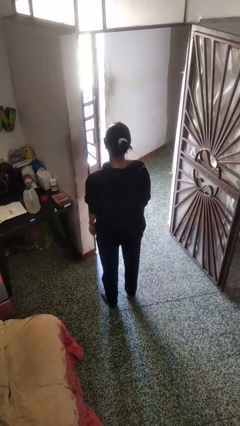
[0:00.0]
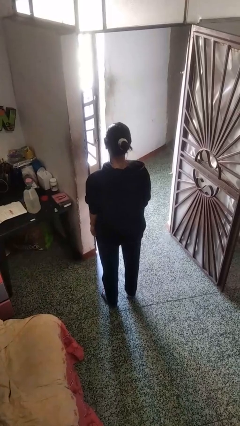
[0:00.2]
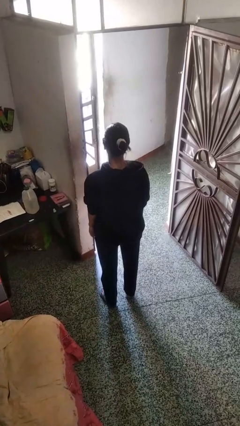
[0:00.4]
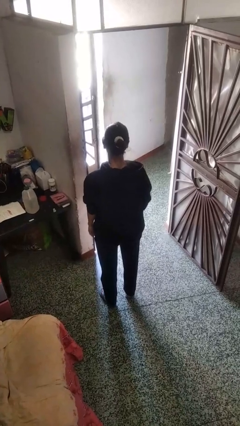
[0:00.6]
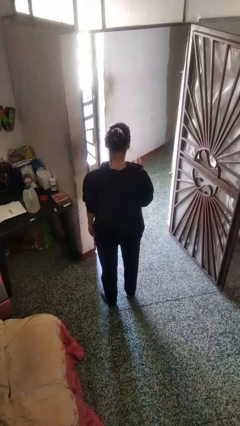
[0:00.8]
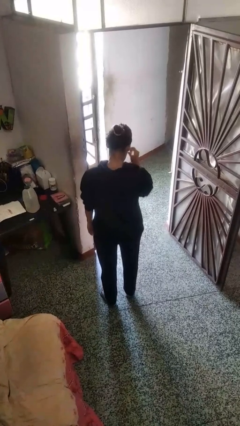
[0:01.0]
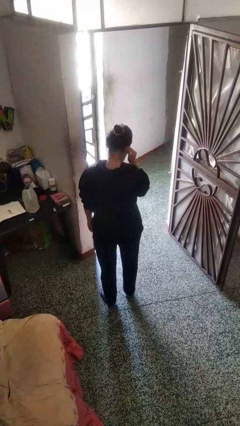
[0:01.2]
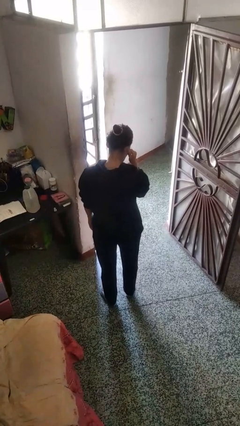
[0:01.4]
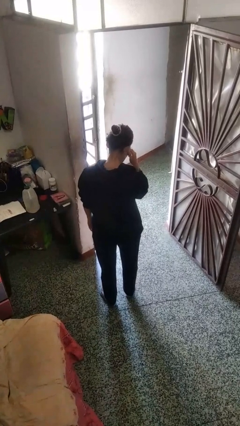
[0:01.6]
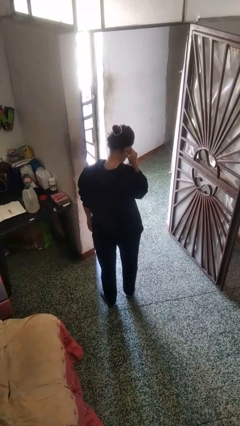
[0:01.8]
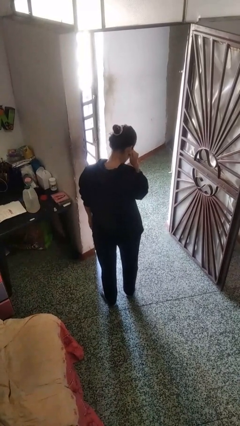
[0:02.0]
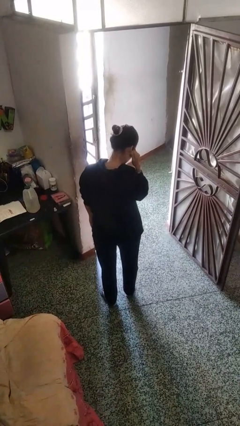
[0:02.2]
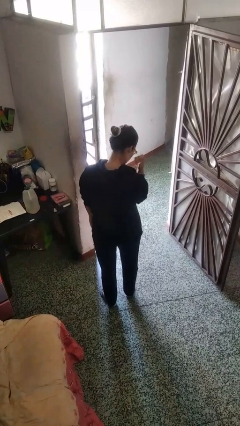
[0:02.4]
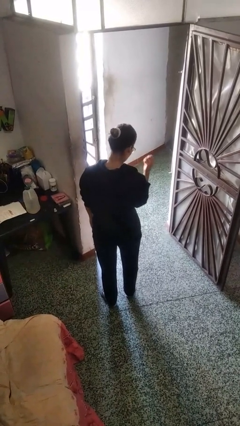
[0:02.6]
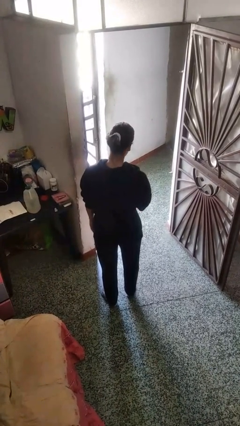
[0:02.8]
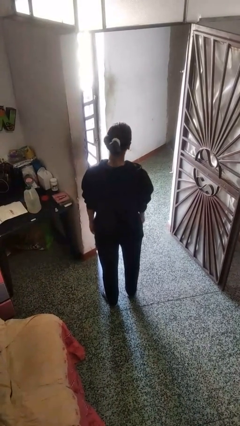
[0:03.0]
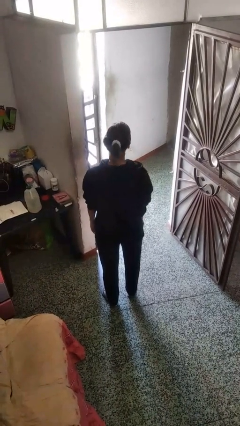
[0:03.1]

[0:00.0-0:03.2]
person touches earlobe

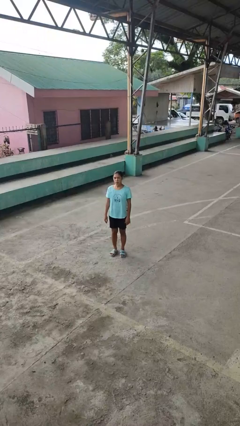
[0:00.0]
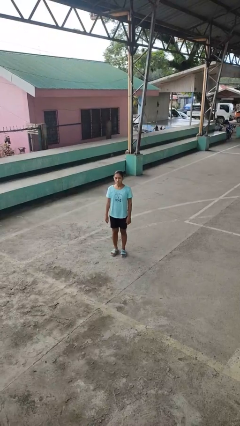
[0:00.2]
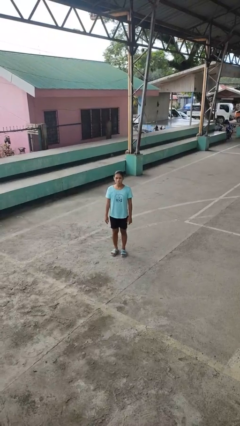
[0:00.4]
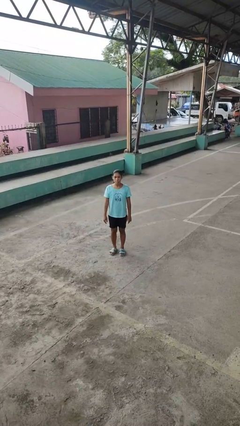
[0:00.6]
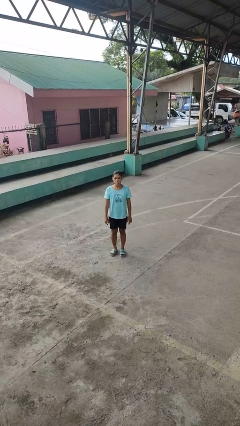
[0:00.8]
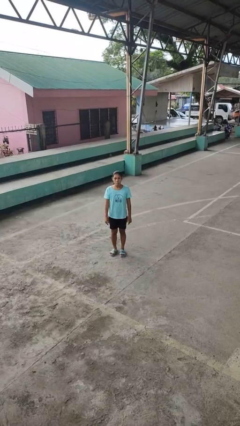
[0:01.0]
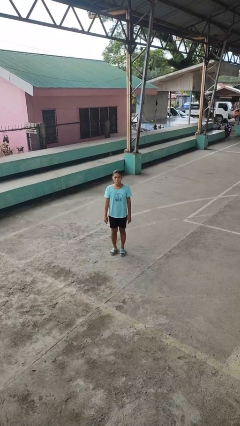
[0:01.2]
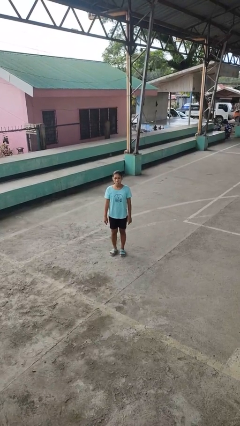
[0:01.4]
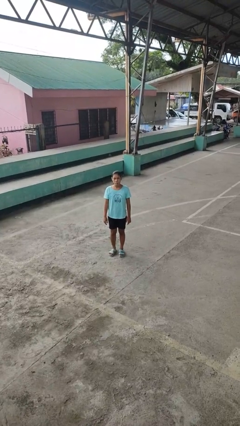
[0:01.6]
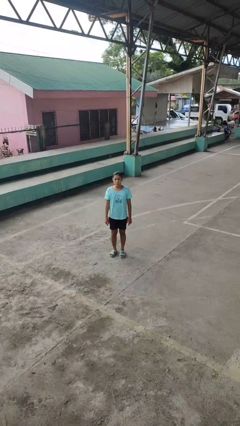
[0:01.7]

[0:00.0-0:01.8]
person sticks out tongue

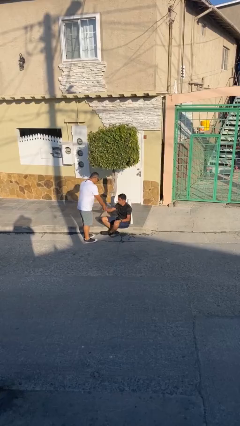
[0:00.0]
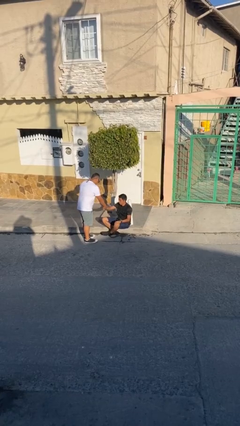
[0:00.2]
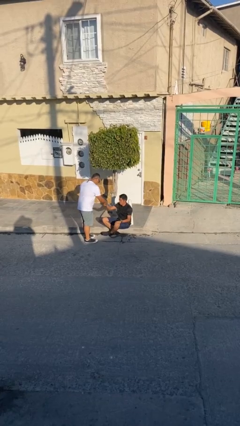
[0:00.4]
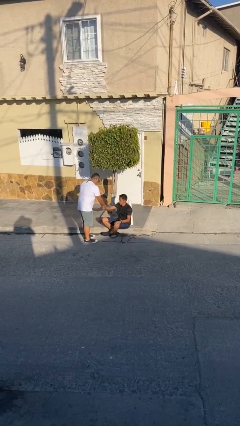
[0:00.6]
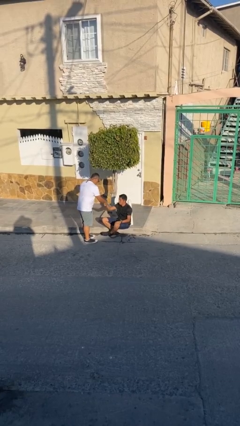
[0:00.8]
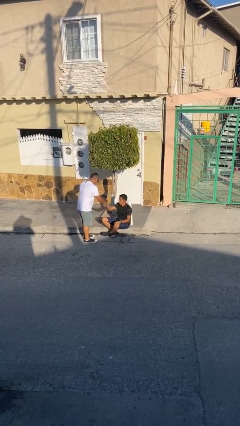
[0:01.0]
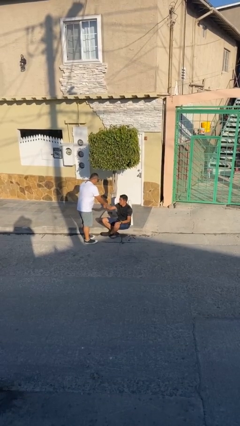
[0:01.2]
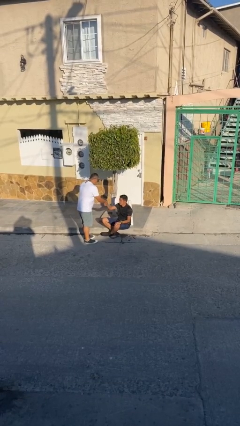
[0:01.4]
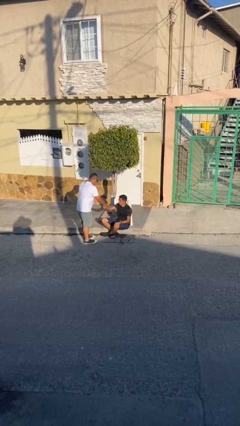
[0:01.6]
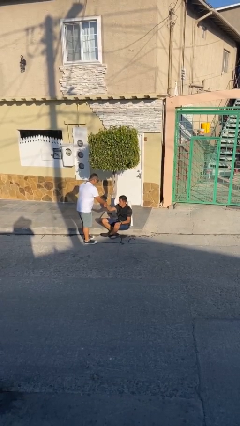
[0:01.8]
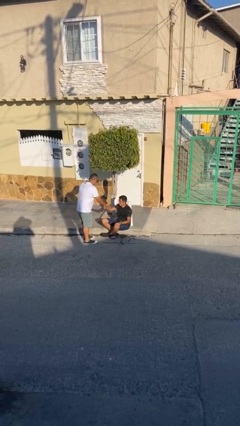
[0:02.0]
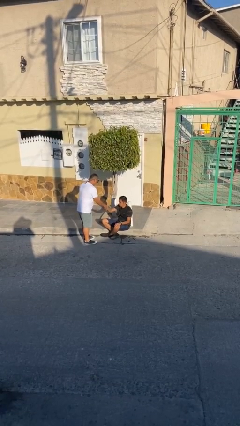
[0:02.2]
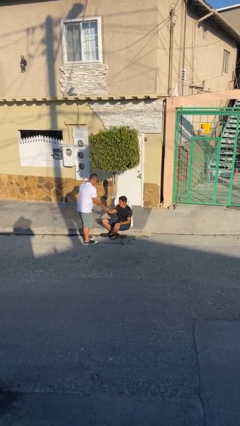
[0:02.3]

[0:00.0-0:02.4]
person shakes hand

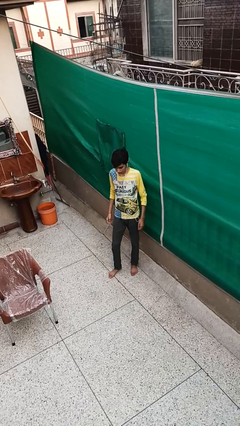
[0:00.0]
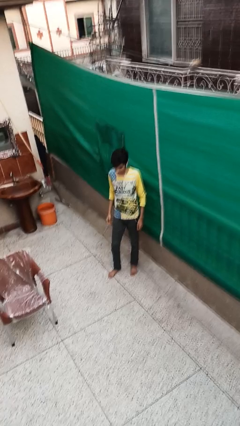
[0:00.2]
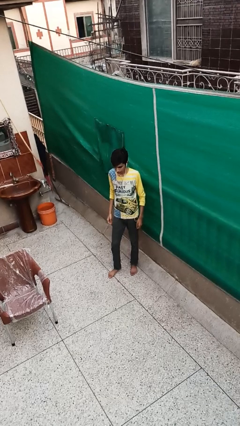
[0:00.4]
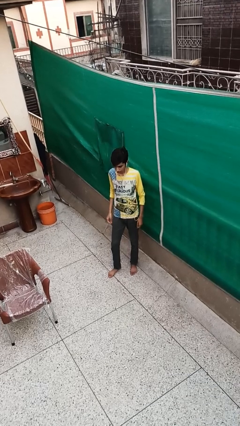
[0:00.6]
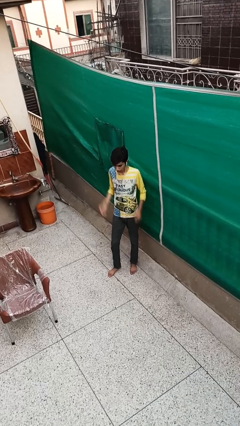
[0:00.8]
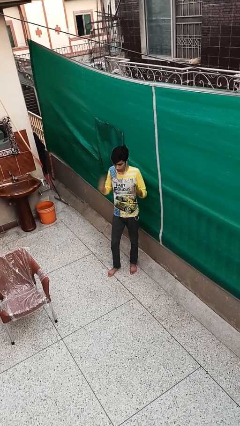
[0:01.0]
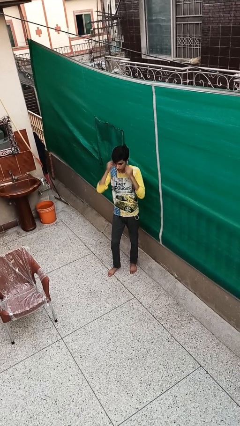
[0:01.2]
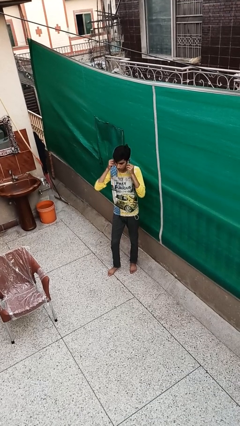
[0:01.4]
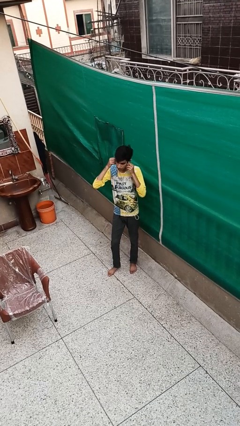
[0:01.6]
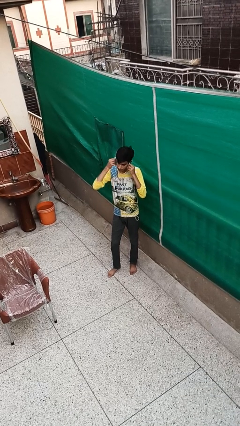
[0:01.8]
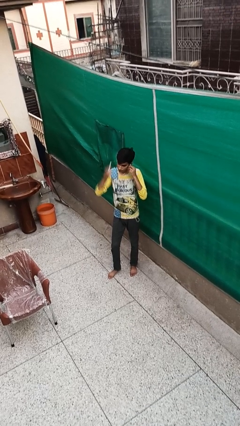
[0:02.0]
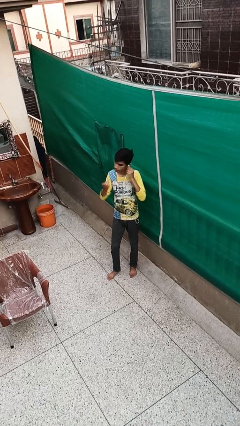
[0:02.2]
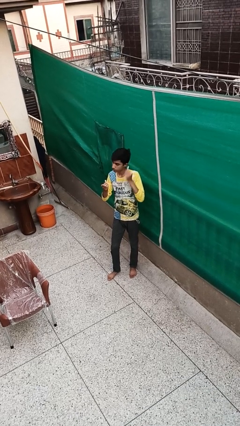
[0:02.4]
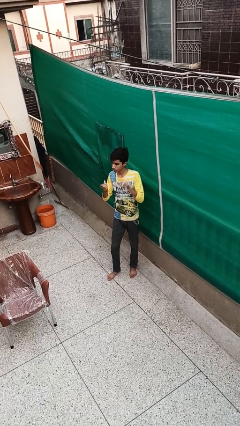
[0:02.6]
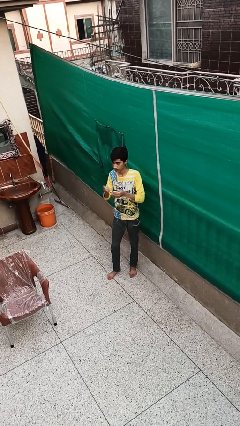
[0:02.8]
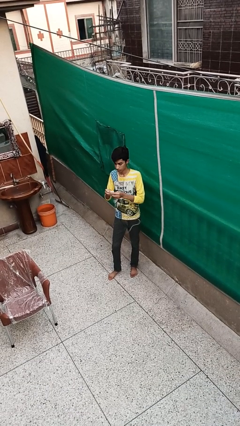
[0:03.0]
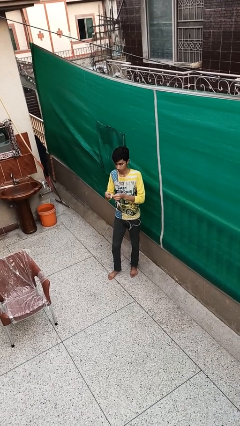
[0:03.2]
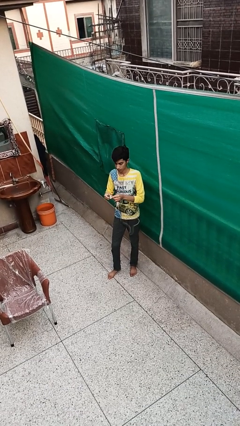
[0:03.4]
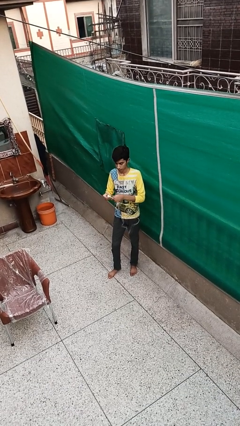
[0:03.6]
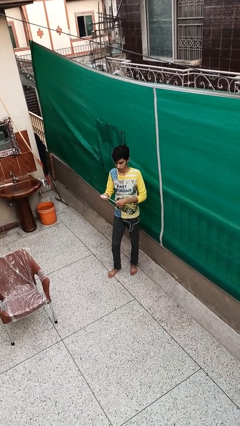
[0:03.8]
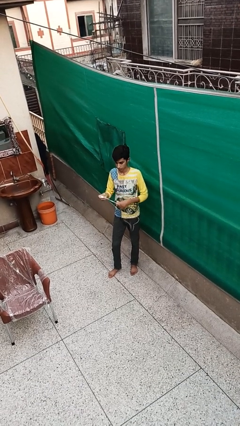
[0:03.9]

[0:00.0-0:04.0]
person takes off headphones

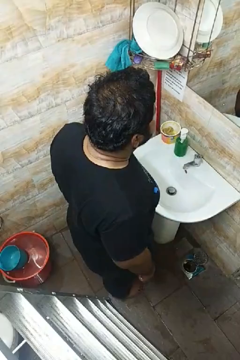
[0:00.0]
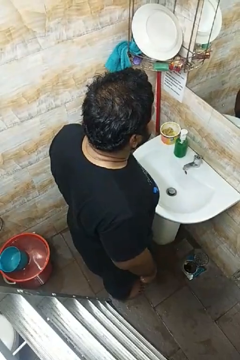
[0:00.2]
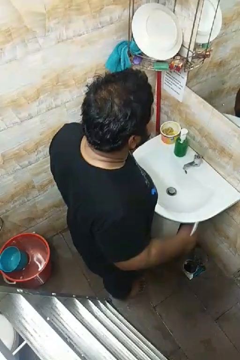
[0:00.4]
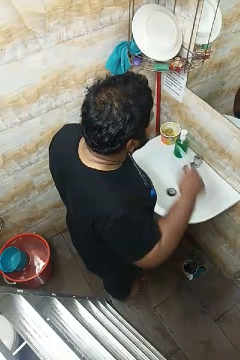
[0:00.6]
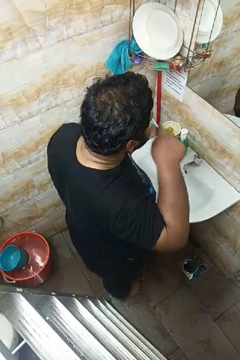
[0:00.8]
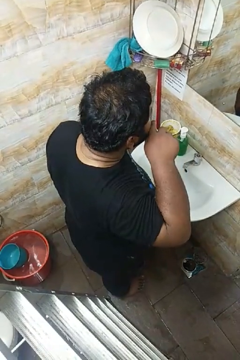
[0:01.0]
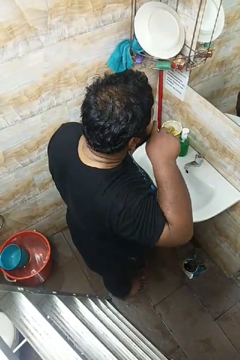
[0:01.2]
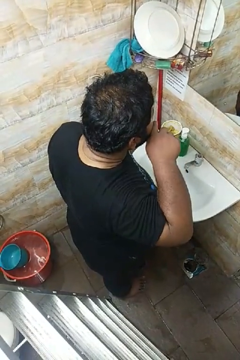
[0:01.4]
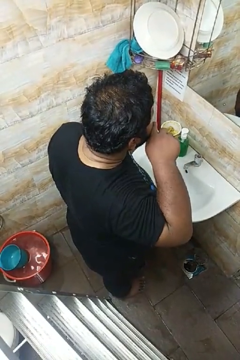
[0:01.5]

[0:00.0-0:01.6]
person brushes teeth

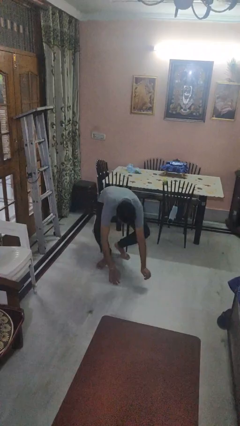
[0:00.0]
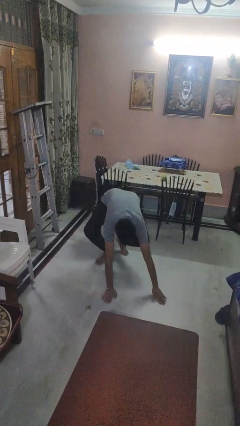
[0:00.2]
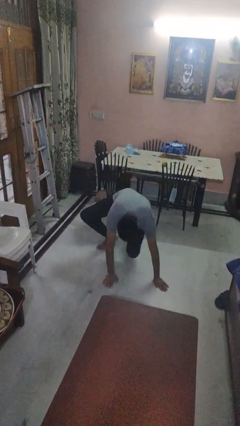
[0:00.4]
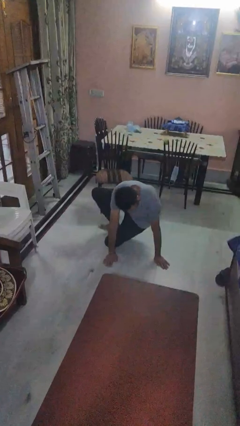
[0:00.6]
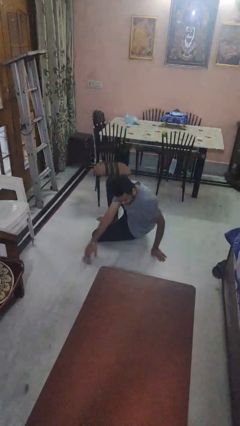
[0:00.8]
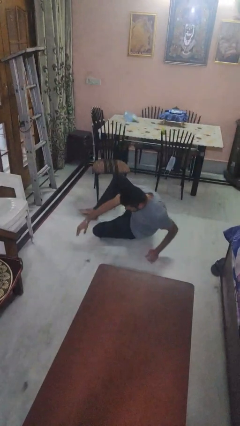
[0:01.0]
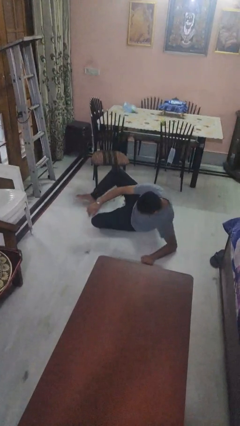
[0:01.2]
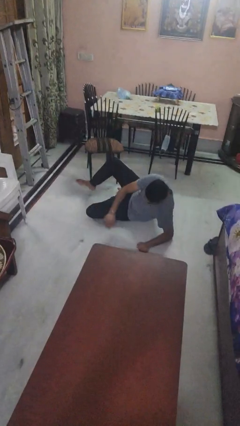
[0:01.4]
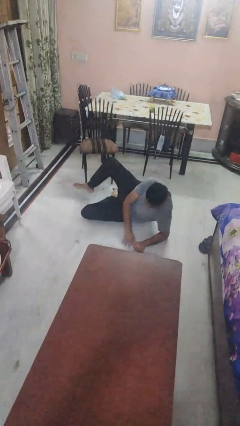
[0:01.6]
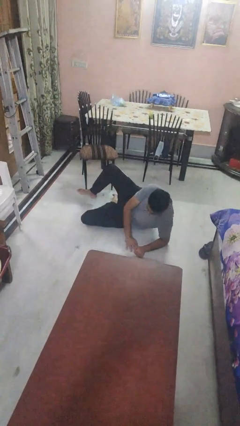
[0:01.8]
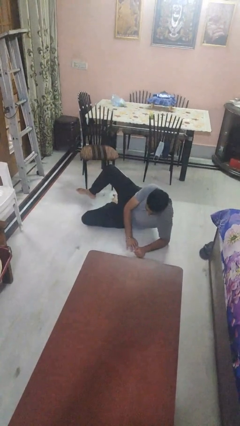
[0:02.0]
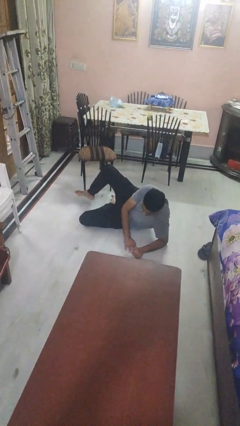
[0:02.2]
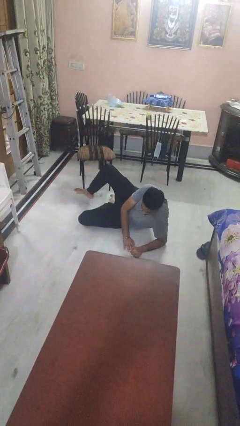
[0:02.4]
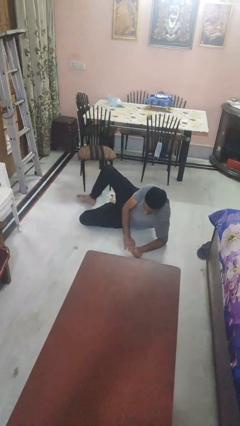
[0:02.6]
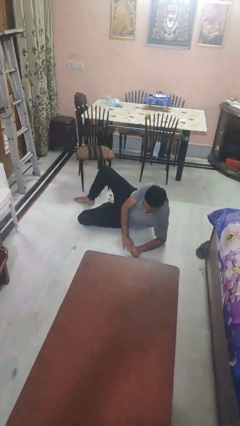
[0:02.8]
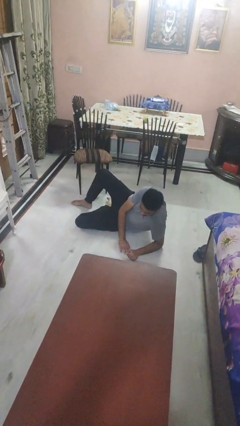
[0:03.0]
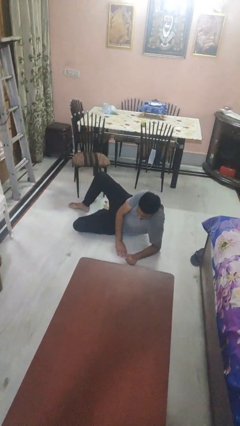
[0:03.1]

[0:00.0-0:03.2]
person falls while standing

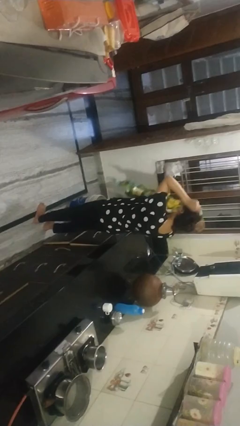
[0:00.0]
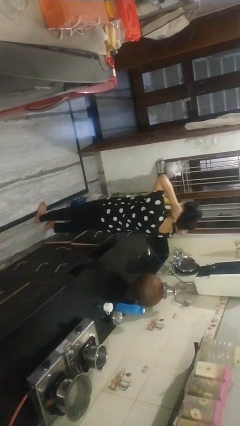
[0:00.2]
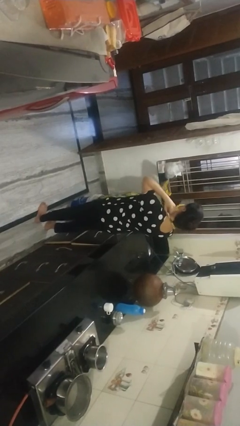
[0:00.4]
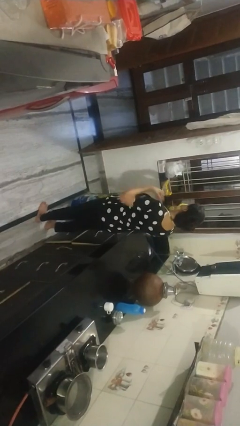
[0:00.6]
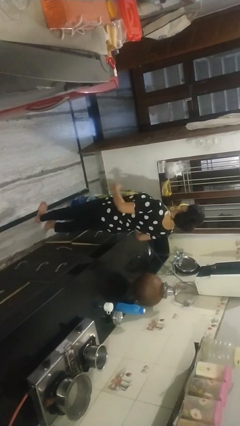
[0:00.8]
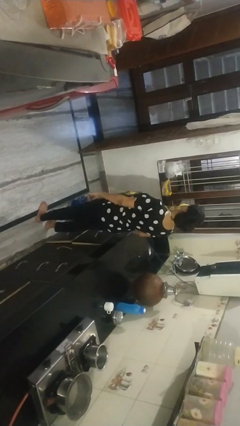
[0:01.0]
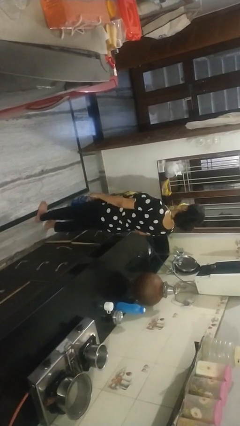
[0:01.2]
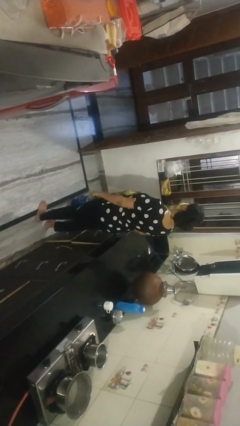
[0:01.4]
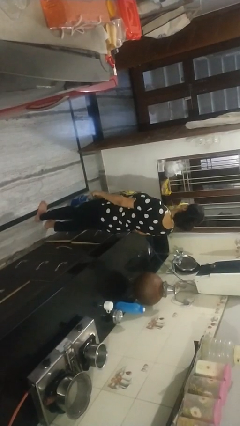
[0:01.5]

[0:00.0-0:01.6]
person puts on apron
